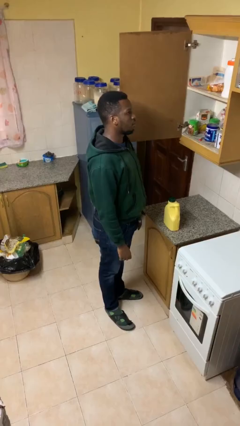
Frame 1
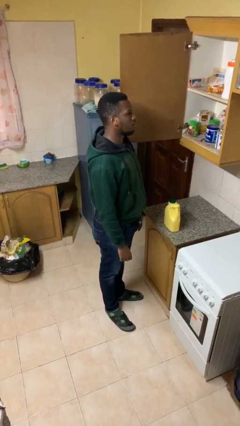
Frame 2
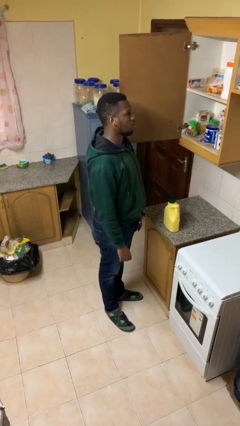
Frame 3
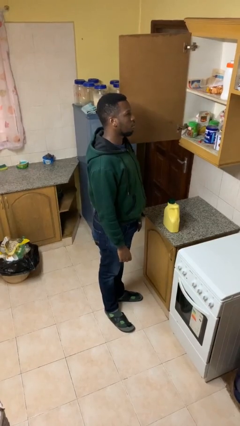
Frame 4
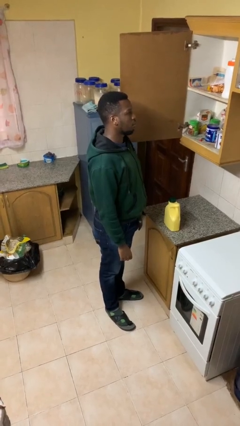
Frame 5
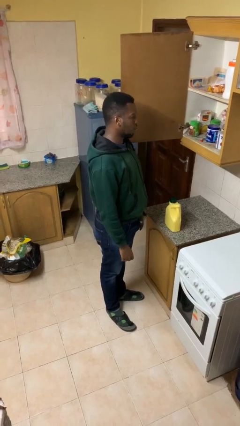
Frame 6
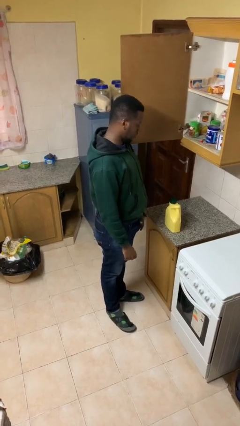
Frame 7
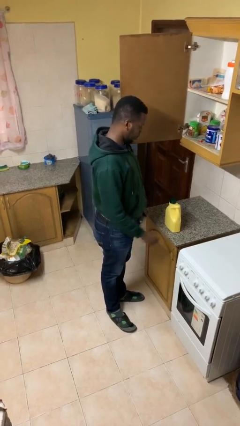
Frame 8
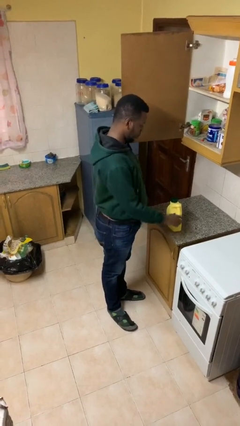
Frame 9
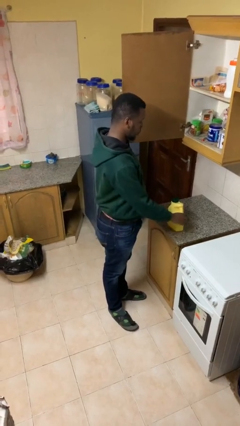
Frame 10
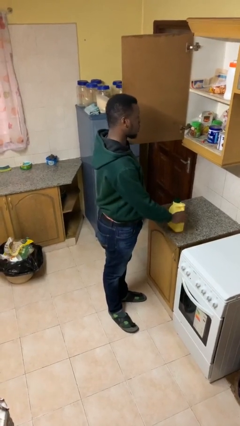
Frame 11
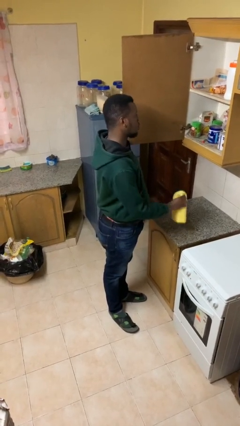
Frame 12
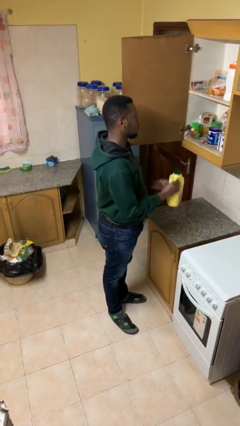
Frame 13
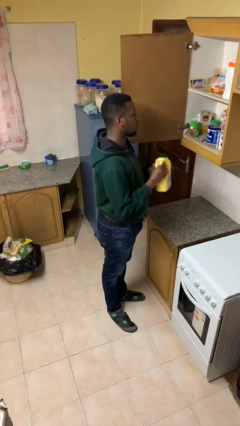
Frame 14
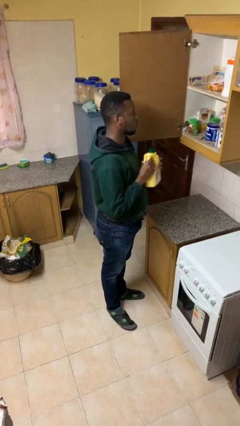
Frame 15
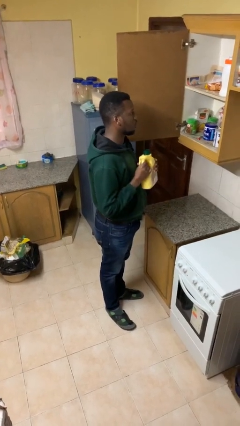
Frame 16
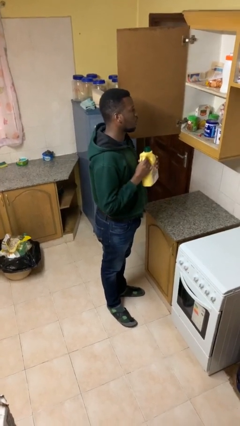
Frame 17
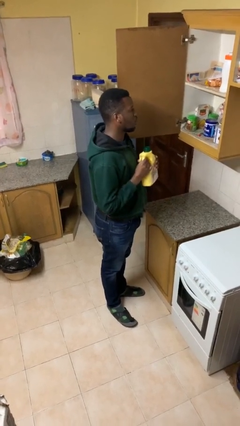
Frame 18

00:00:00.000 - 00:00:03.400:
person picks up object from table

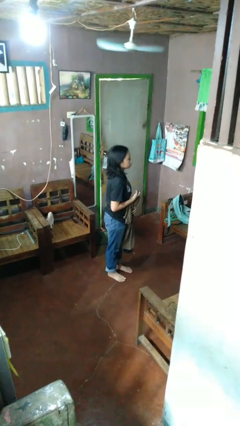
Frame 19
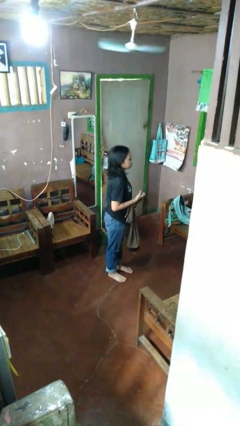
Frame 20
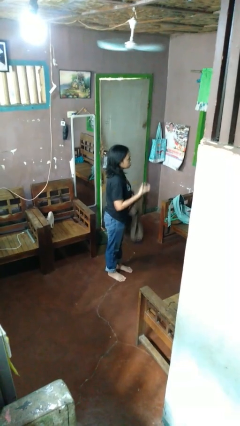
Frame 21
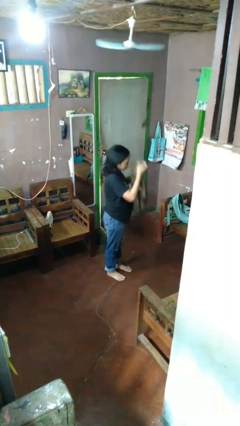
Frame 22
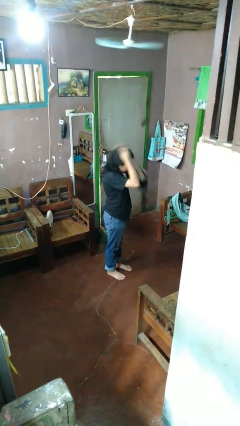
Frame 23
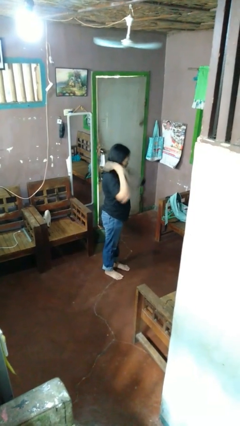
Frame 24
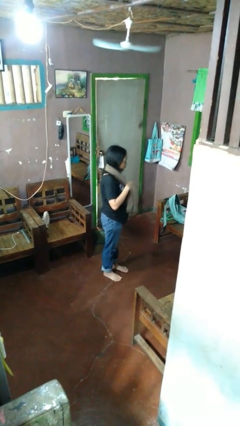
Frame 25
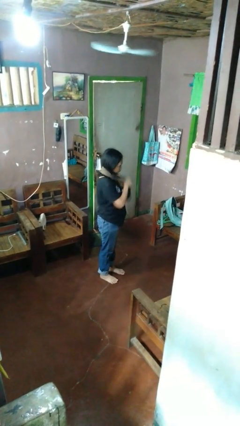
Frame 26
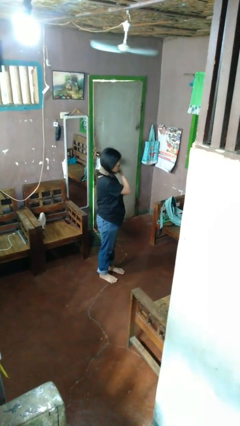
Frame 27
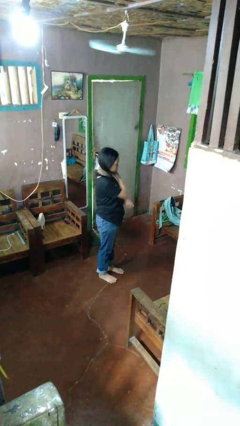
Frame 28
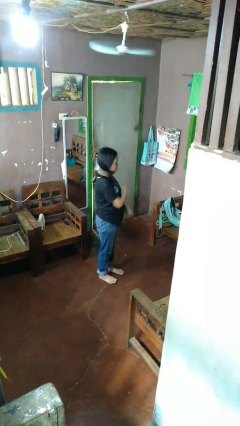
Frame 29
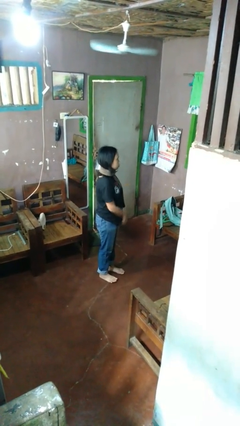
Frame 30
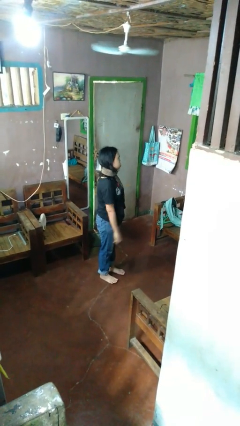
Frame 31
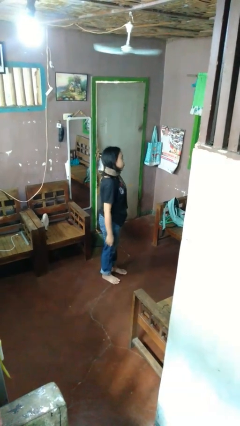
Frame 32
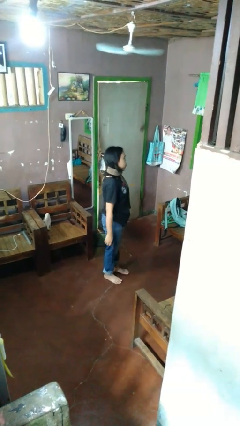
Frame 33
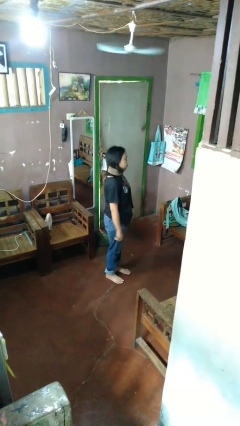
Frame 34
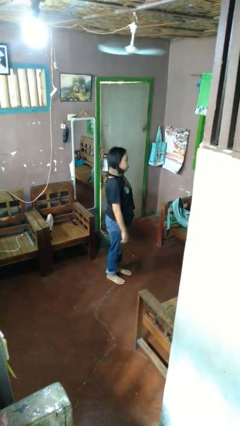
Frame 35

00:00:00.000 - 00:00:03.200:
person puts on scarf

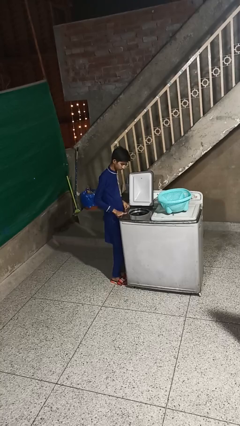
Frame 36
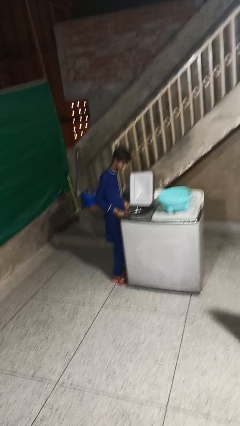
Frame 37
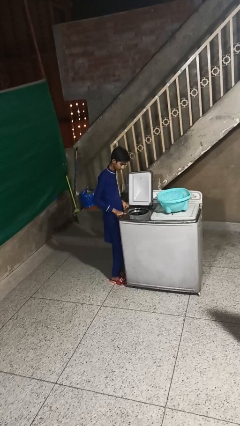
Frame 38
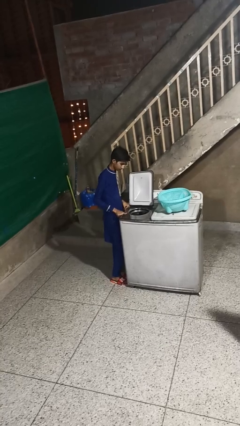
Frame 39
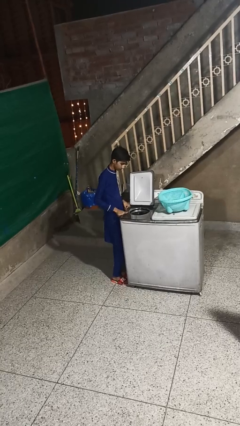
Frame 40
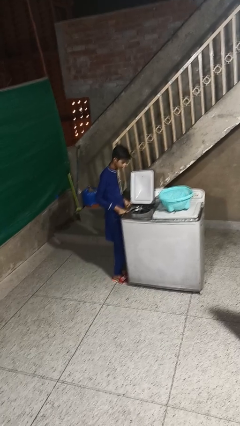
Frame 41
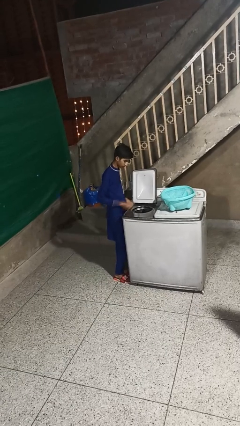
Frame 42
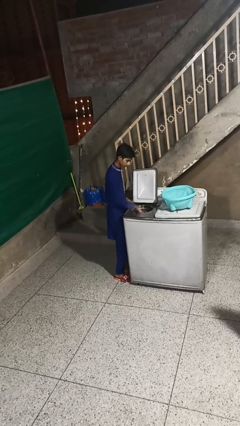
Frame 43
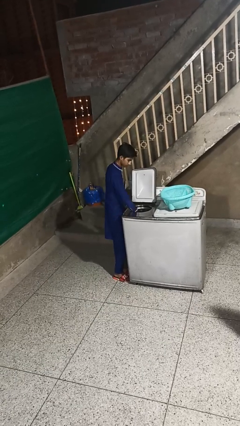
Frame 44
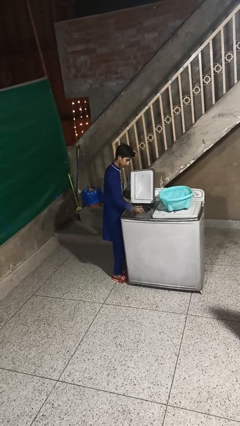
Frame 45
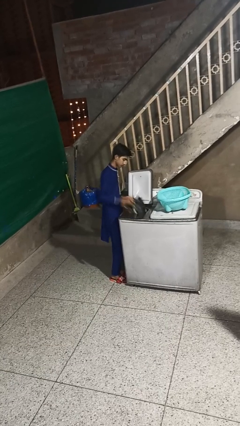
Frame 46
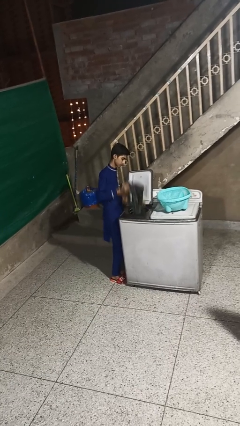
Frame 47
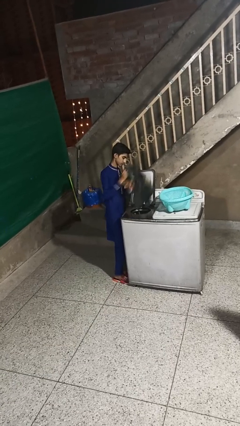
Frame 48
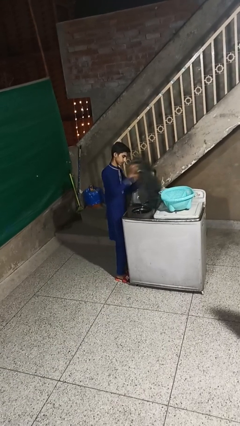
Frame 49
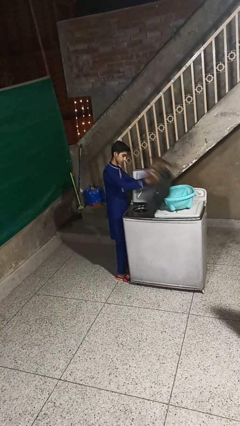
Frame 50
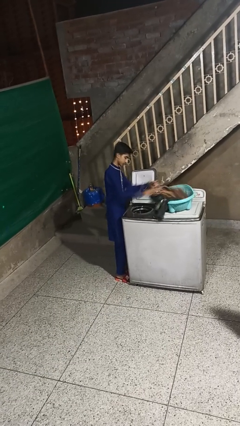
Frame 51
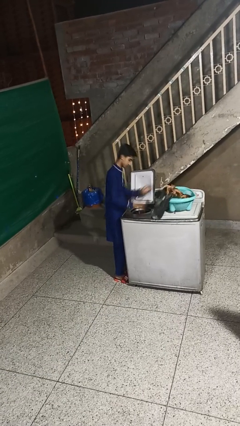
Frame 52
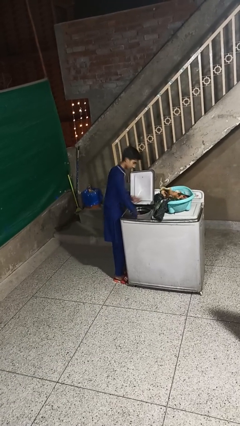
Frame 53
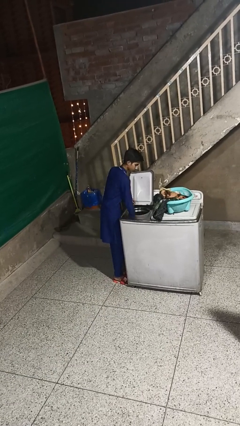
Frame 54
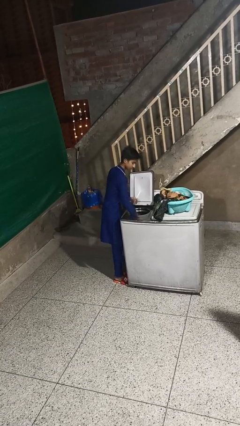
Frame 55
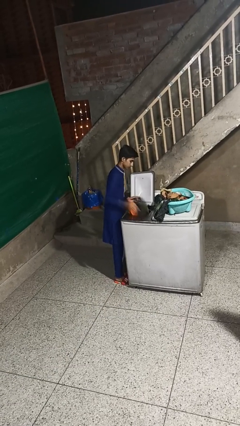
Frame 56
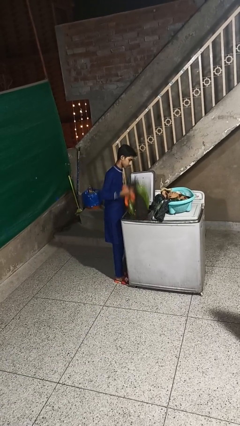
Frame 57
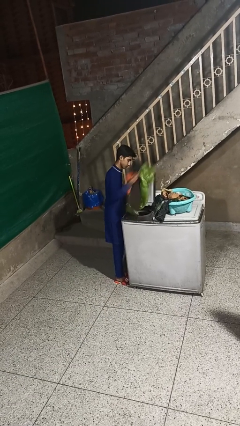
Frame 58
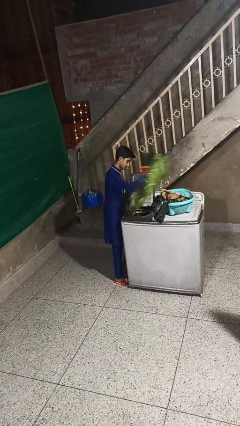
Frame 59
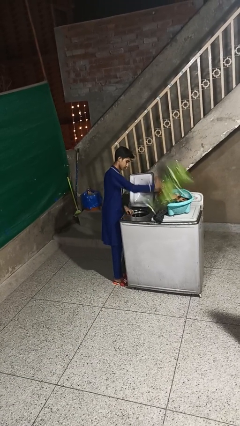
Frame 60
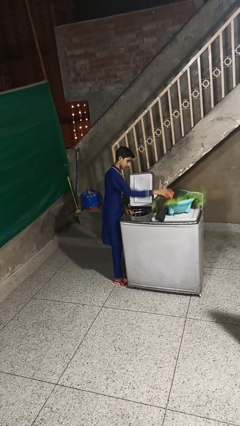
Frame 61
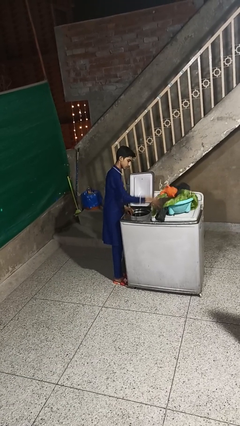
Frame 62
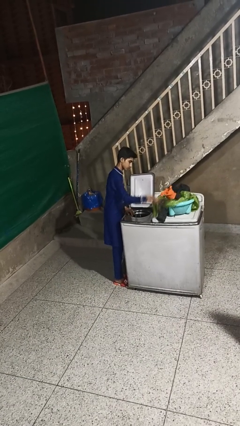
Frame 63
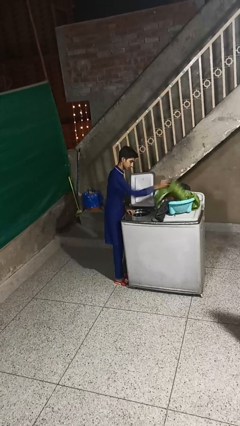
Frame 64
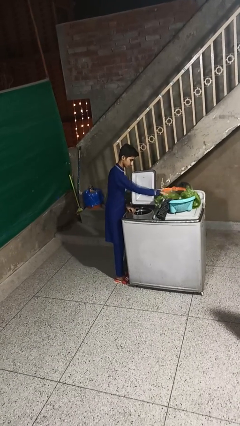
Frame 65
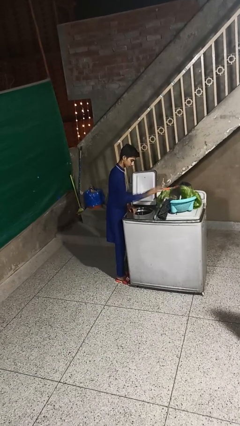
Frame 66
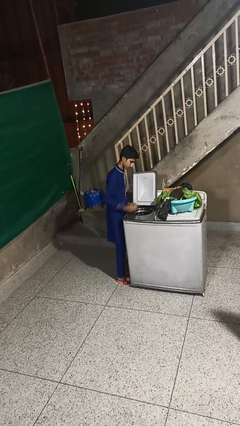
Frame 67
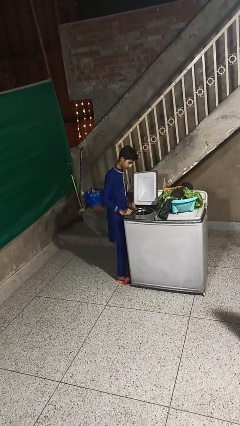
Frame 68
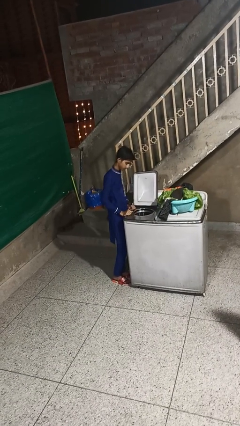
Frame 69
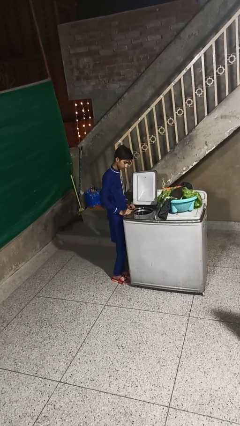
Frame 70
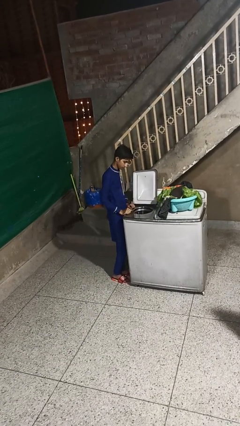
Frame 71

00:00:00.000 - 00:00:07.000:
person unloads dryer

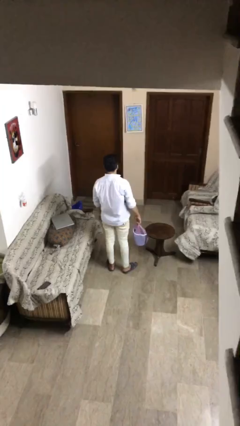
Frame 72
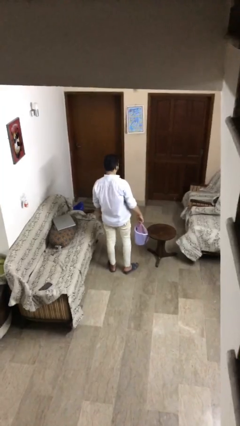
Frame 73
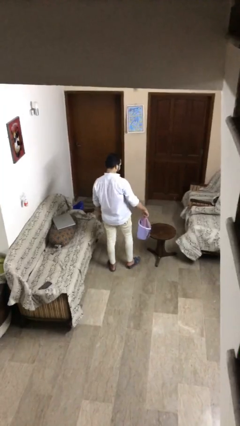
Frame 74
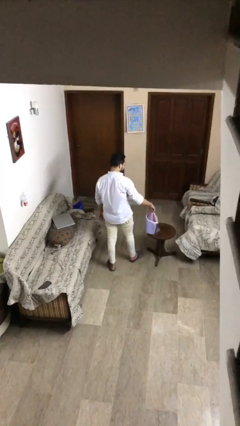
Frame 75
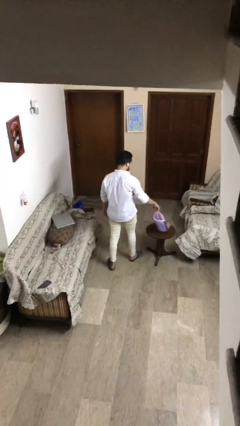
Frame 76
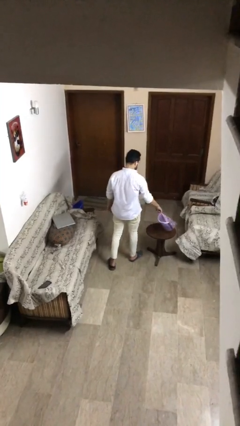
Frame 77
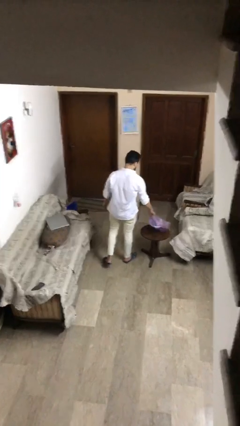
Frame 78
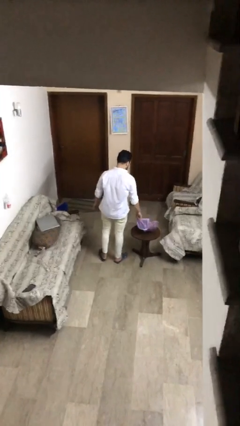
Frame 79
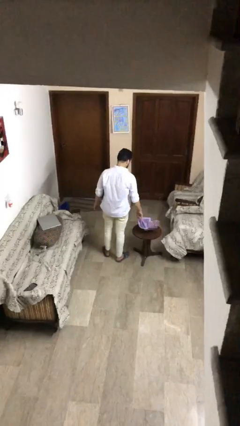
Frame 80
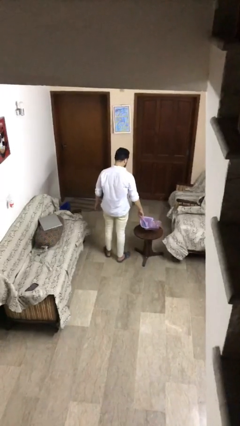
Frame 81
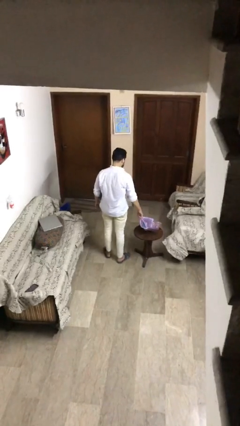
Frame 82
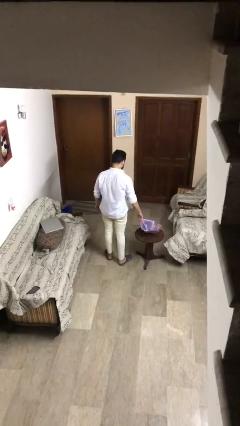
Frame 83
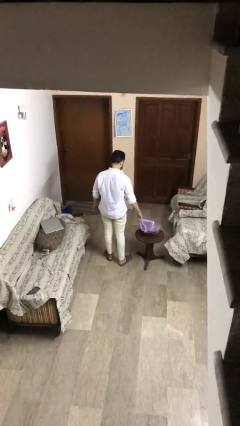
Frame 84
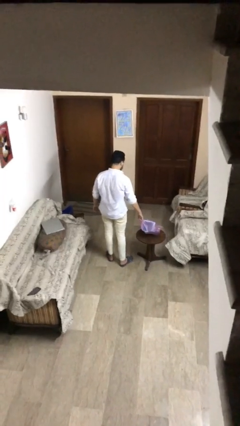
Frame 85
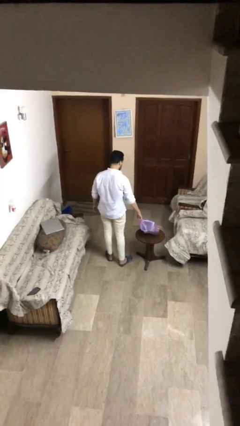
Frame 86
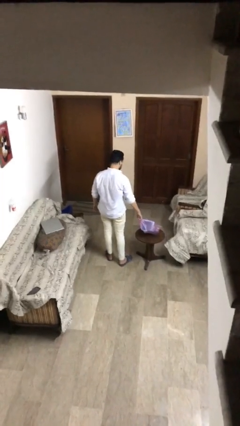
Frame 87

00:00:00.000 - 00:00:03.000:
person puts down object on table

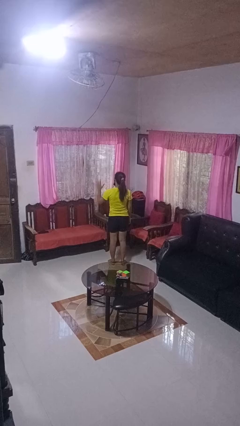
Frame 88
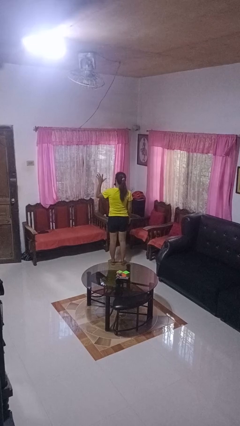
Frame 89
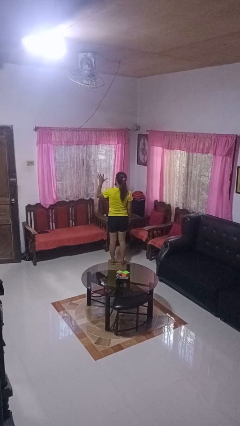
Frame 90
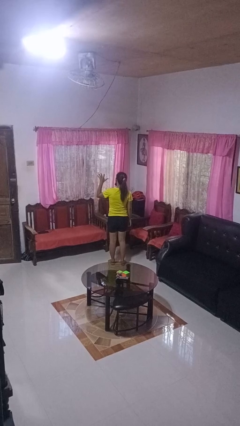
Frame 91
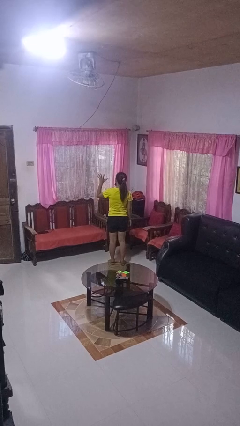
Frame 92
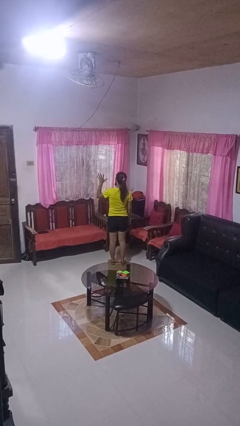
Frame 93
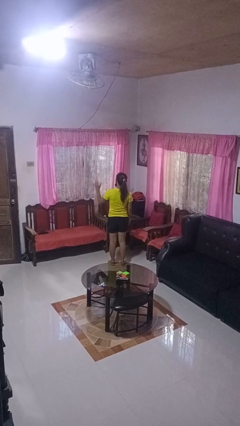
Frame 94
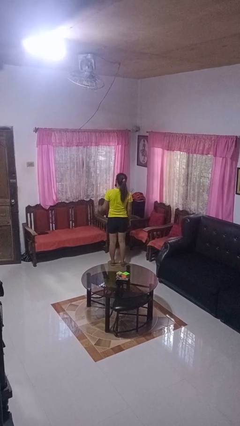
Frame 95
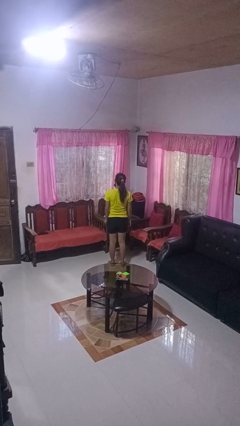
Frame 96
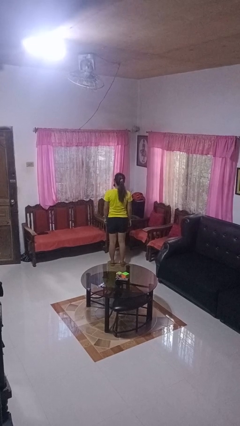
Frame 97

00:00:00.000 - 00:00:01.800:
person gestures number five
